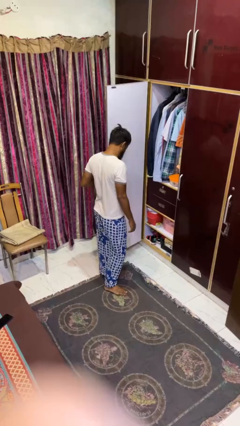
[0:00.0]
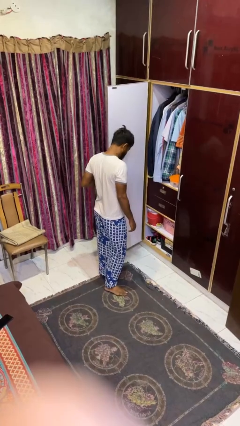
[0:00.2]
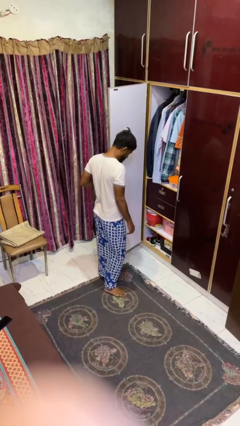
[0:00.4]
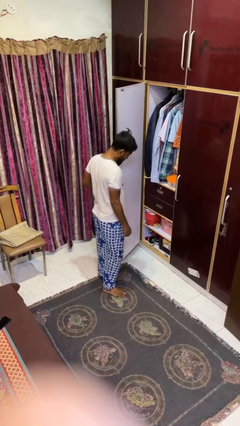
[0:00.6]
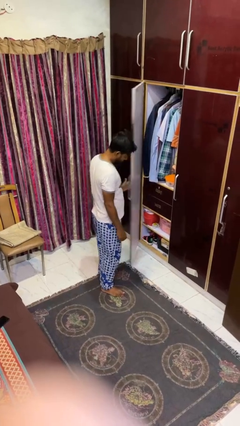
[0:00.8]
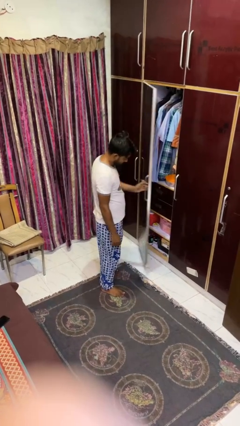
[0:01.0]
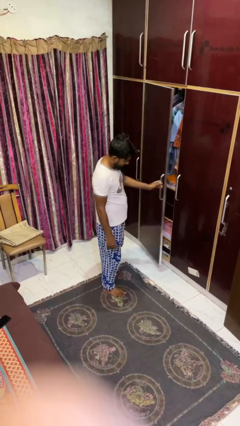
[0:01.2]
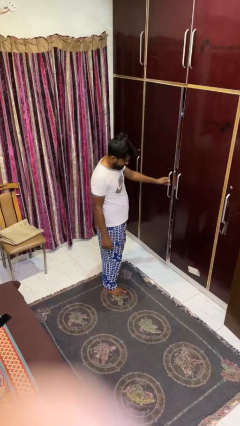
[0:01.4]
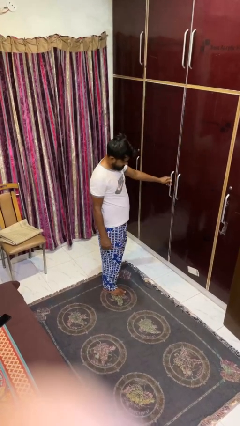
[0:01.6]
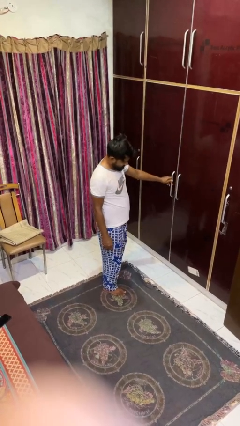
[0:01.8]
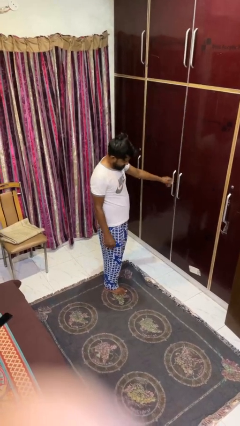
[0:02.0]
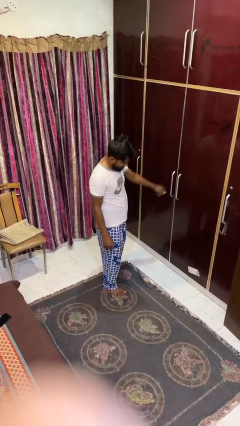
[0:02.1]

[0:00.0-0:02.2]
person closes closet door

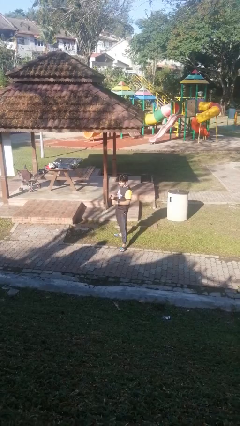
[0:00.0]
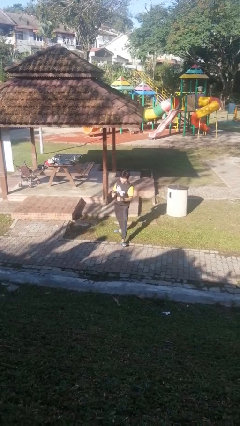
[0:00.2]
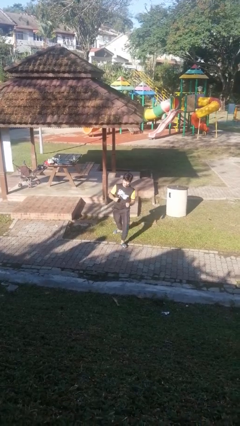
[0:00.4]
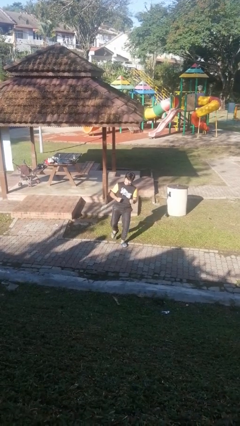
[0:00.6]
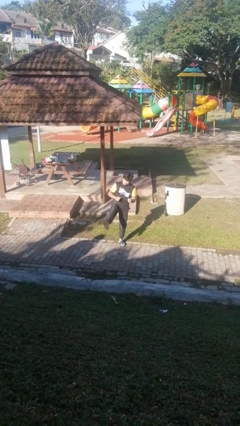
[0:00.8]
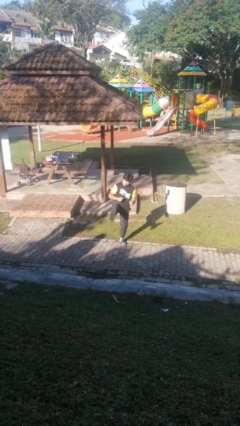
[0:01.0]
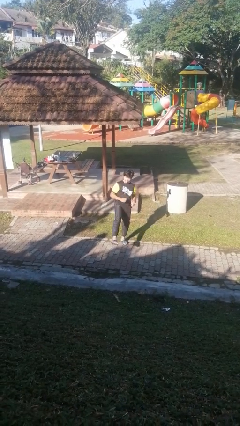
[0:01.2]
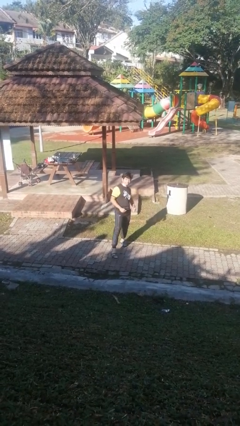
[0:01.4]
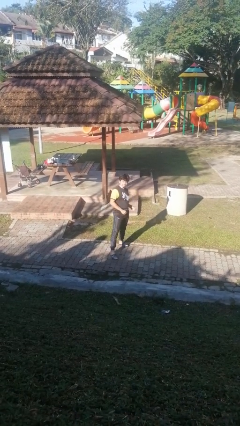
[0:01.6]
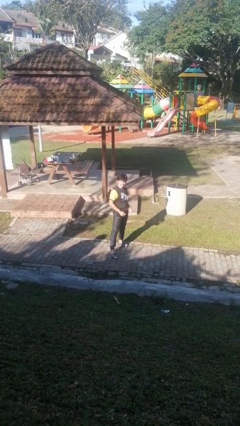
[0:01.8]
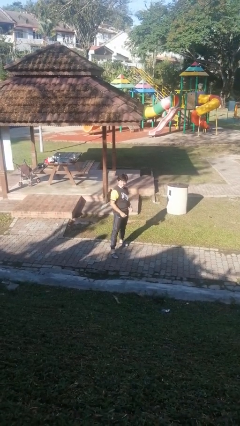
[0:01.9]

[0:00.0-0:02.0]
person karate kicks

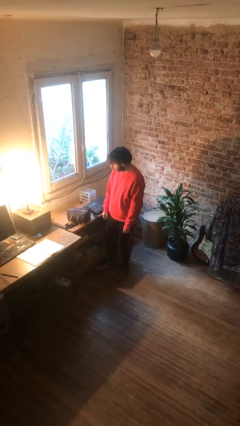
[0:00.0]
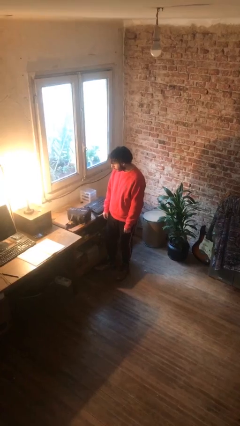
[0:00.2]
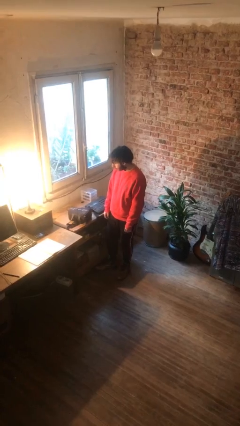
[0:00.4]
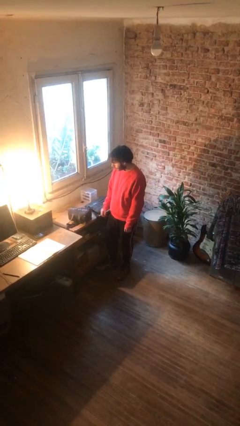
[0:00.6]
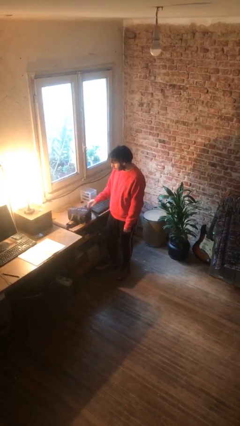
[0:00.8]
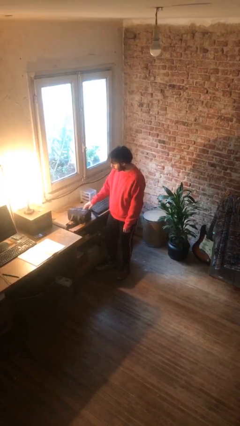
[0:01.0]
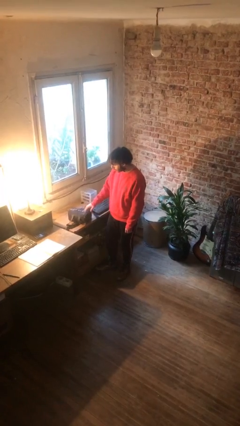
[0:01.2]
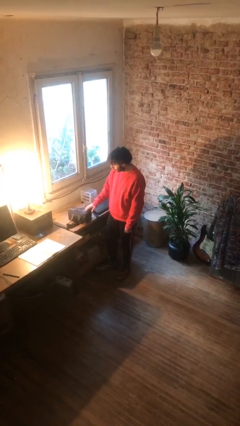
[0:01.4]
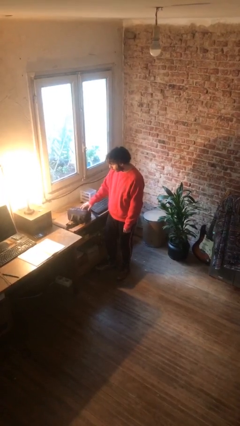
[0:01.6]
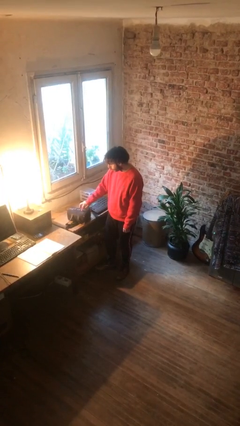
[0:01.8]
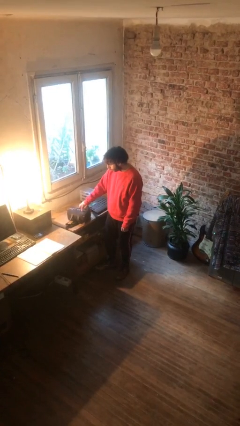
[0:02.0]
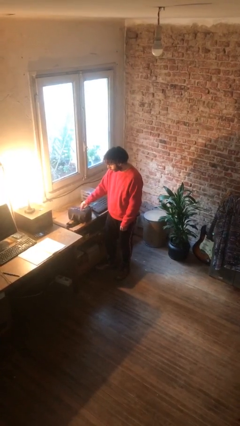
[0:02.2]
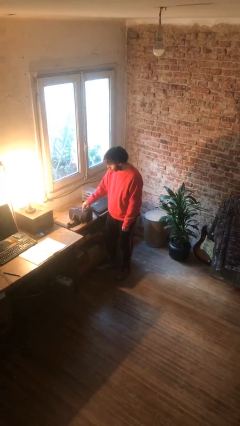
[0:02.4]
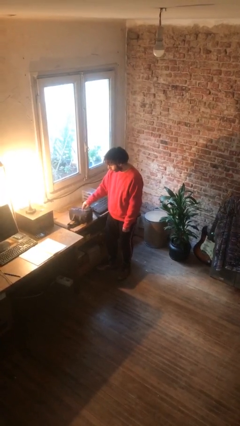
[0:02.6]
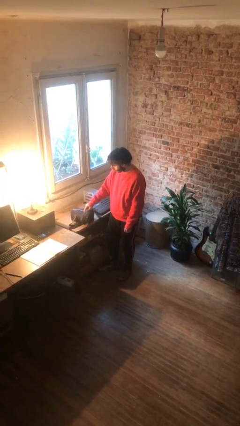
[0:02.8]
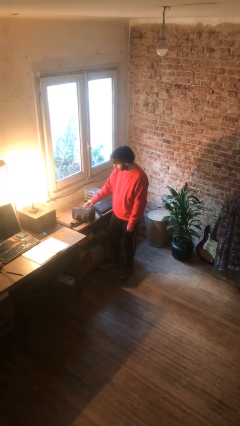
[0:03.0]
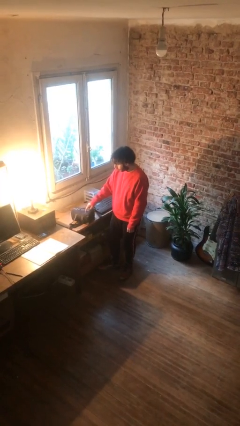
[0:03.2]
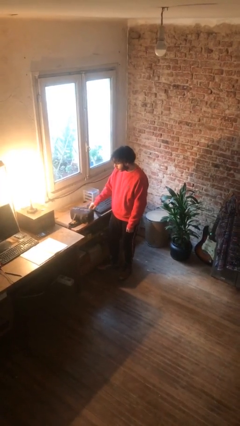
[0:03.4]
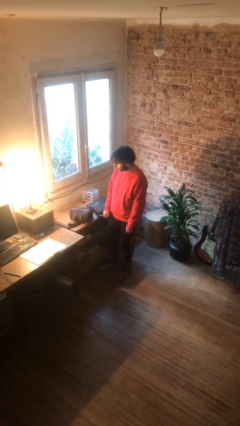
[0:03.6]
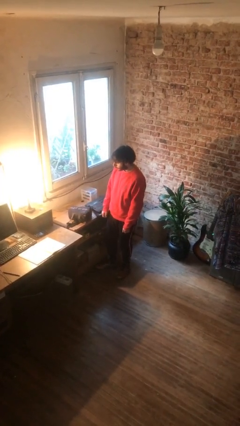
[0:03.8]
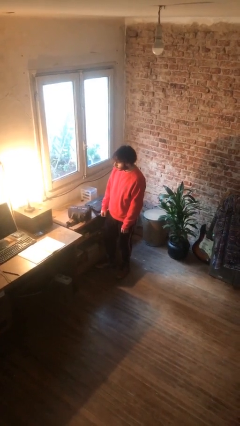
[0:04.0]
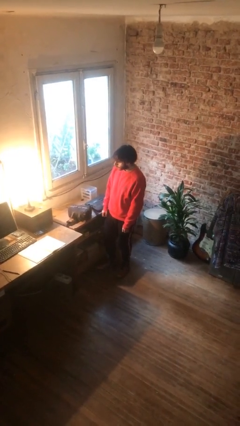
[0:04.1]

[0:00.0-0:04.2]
person taps object with finger

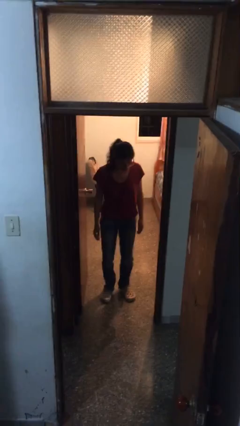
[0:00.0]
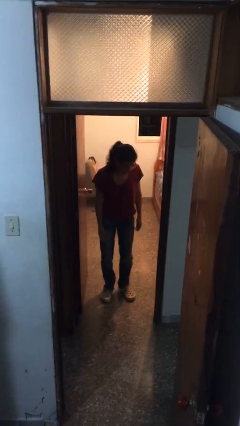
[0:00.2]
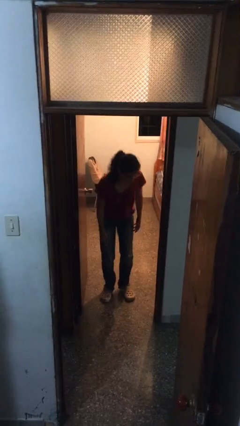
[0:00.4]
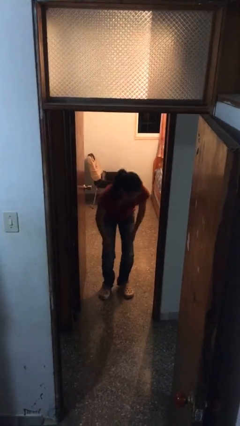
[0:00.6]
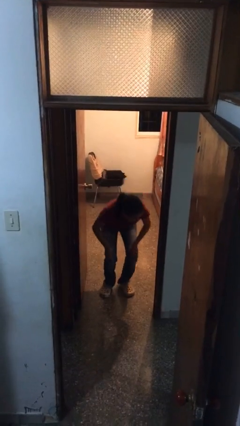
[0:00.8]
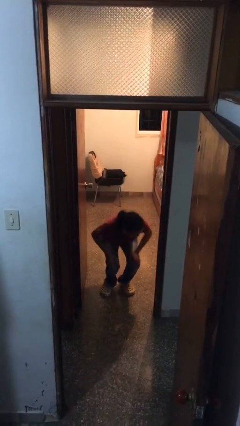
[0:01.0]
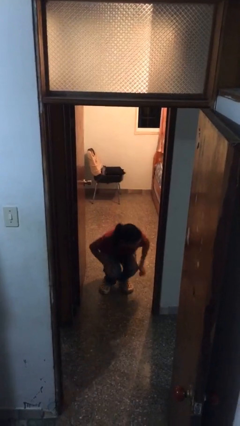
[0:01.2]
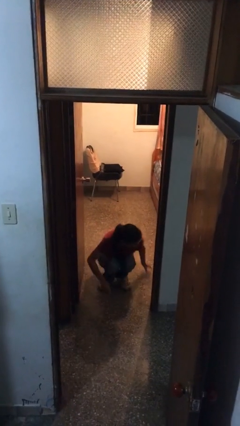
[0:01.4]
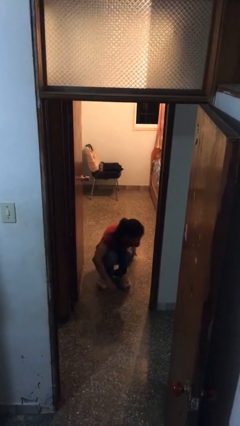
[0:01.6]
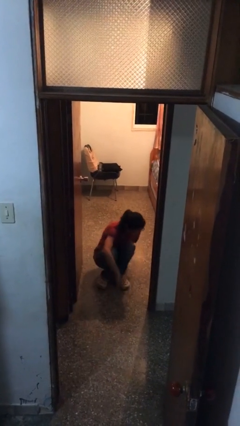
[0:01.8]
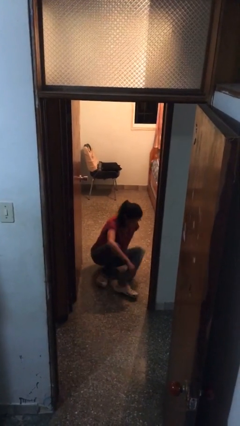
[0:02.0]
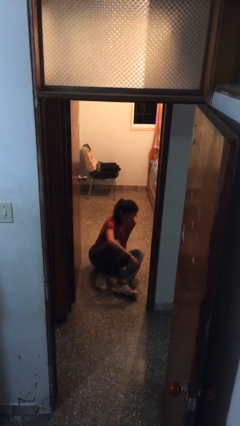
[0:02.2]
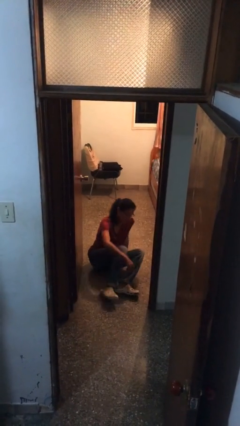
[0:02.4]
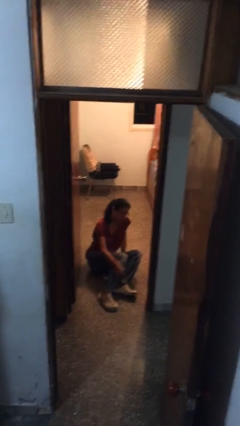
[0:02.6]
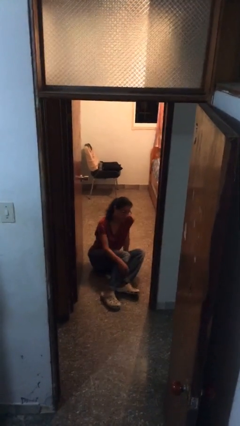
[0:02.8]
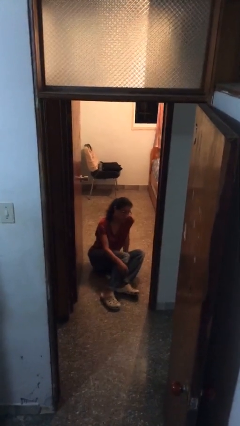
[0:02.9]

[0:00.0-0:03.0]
person sits down

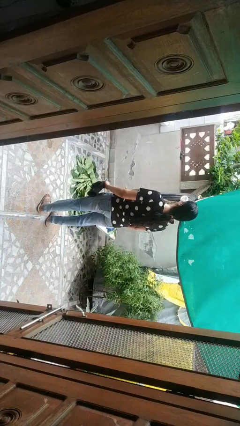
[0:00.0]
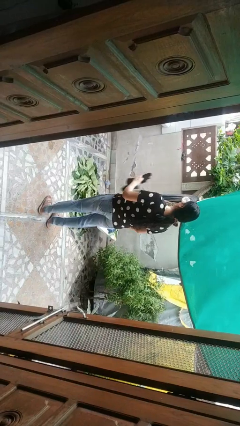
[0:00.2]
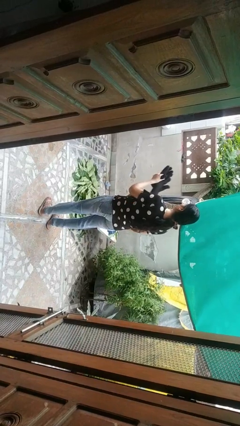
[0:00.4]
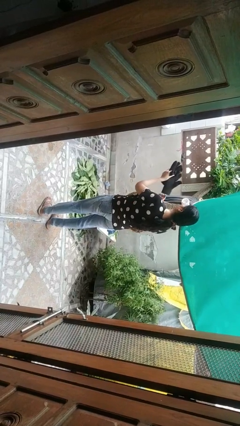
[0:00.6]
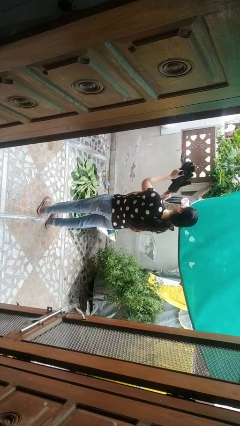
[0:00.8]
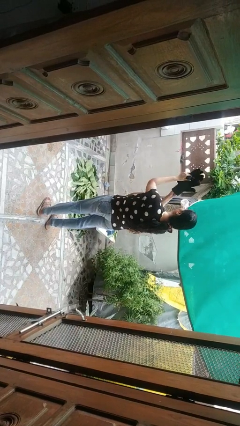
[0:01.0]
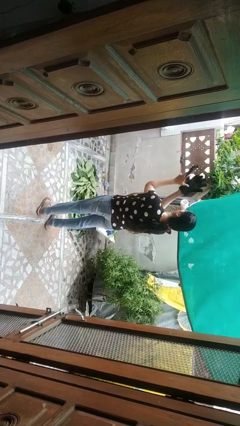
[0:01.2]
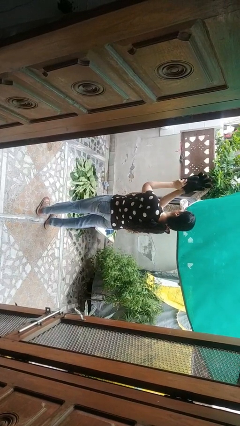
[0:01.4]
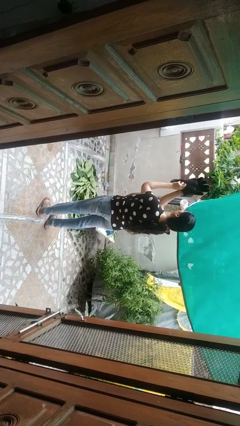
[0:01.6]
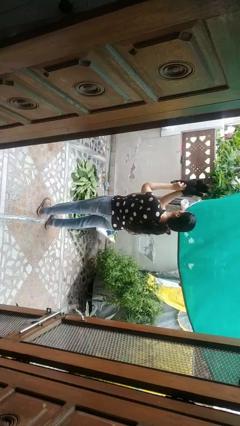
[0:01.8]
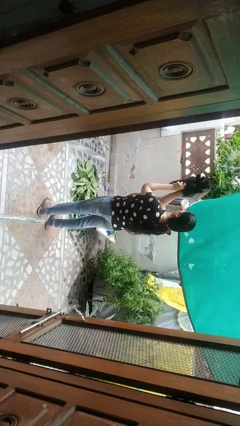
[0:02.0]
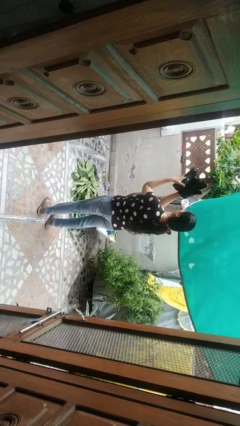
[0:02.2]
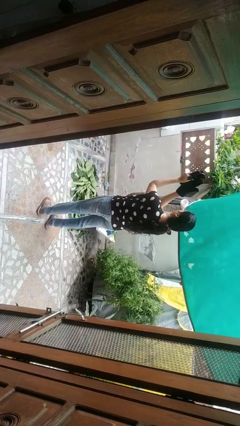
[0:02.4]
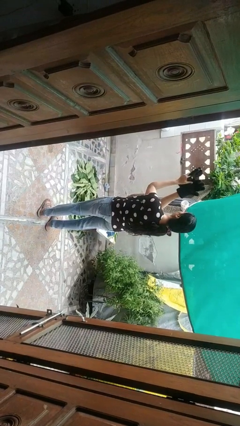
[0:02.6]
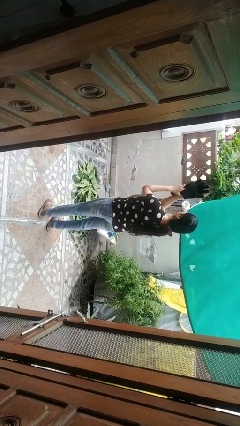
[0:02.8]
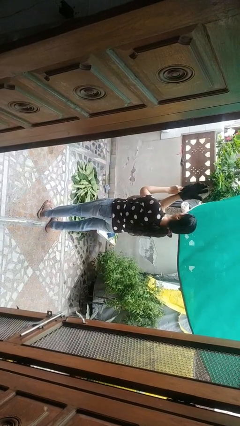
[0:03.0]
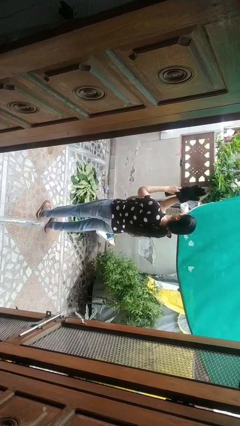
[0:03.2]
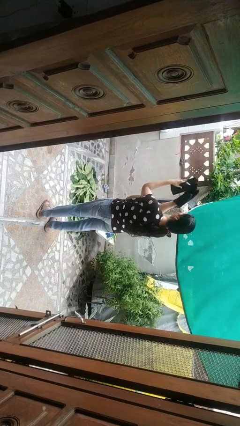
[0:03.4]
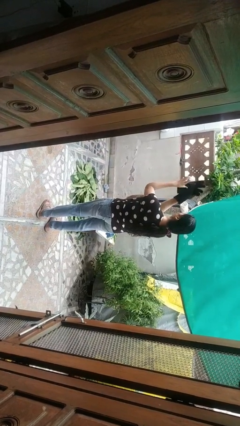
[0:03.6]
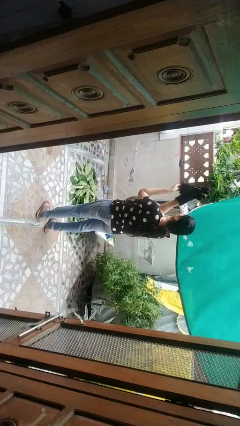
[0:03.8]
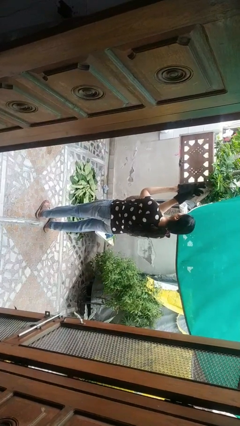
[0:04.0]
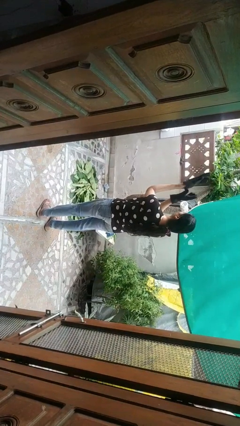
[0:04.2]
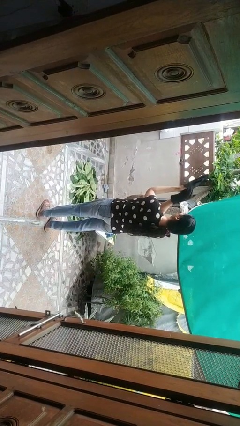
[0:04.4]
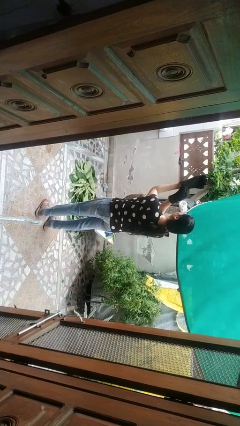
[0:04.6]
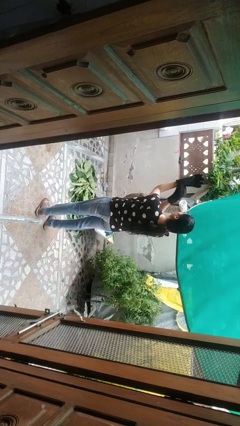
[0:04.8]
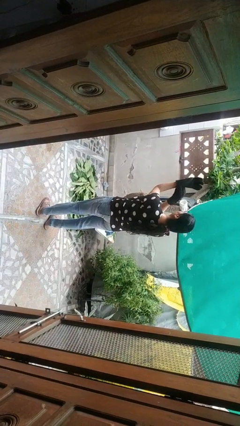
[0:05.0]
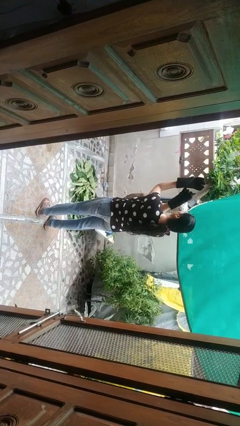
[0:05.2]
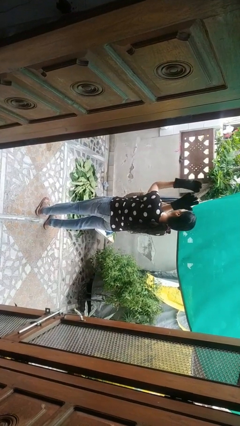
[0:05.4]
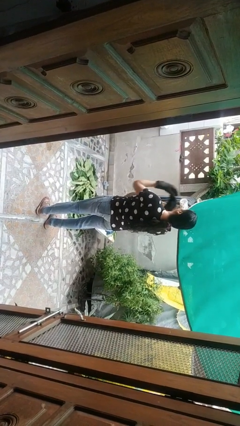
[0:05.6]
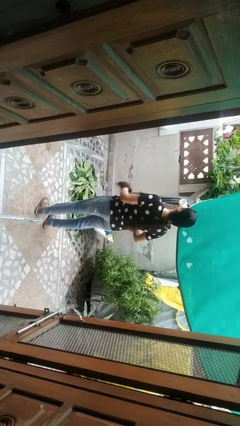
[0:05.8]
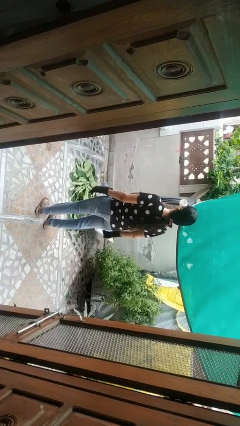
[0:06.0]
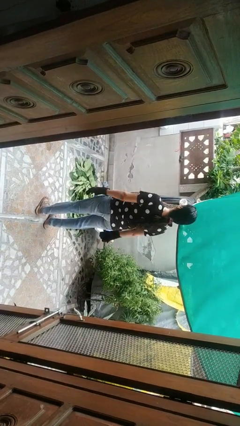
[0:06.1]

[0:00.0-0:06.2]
person puts on gloves
